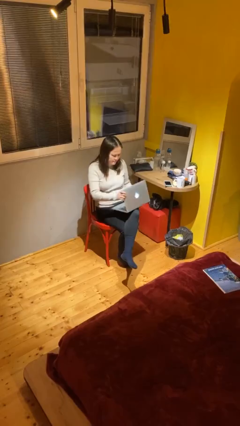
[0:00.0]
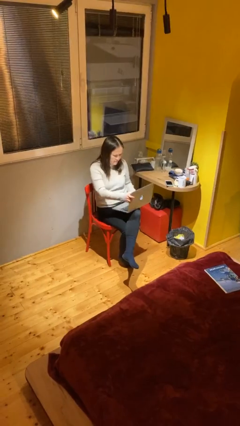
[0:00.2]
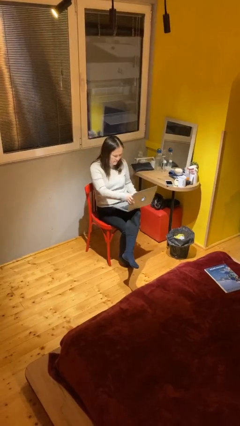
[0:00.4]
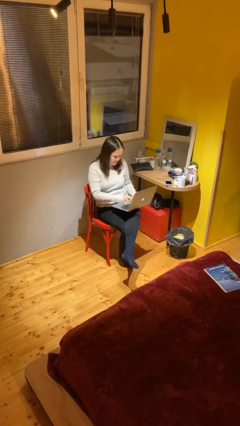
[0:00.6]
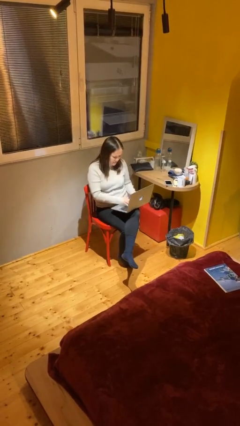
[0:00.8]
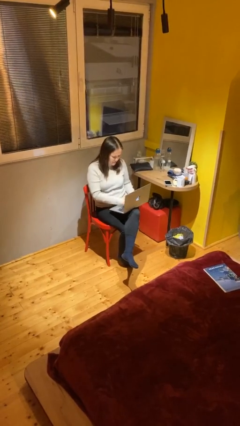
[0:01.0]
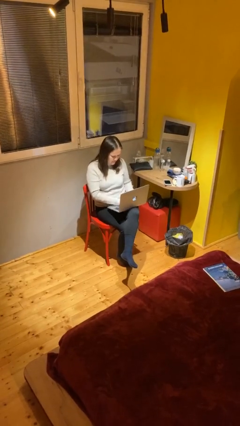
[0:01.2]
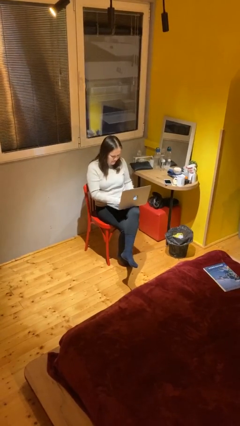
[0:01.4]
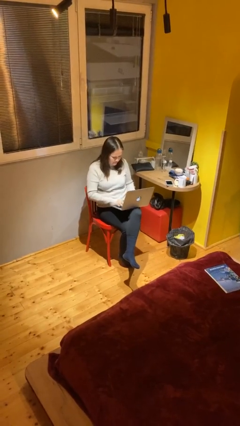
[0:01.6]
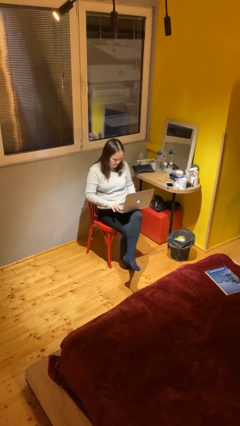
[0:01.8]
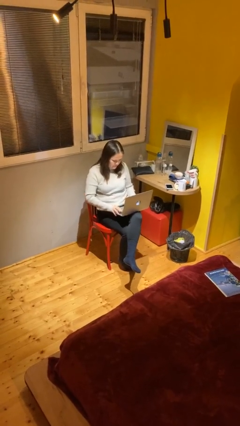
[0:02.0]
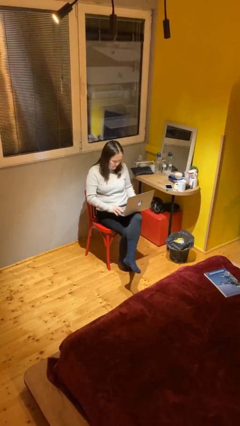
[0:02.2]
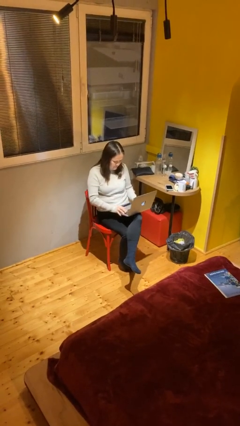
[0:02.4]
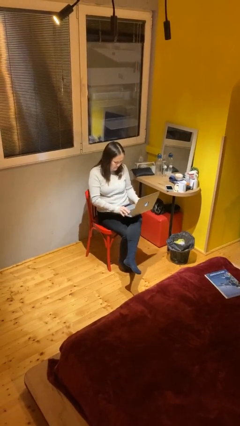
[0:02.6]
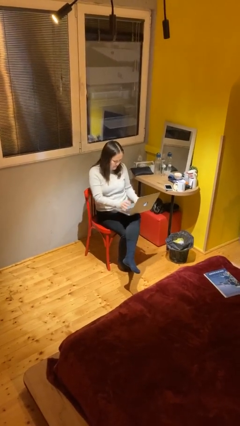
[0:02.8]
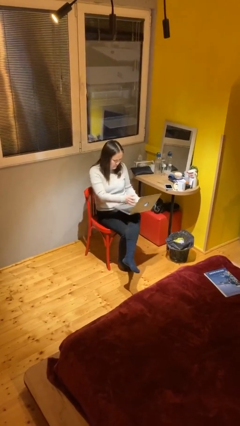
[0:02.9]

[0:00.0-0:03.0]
person interacts with laptop

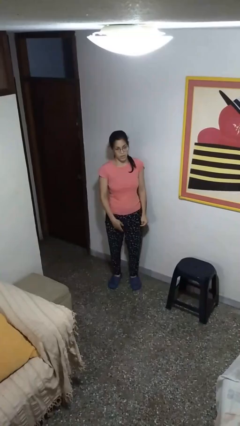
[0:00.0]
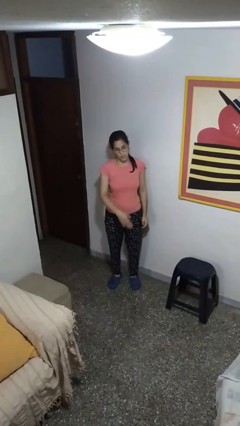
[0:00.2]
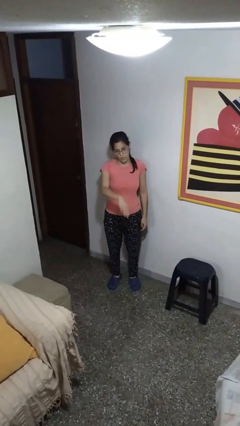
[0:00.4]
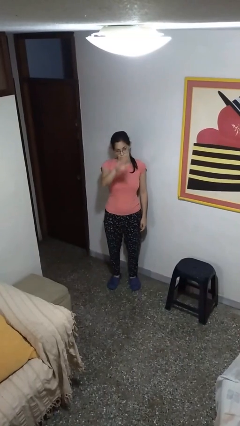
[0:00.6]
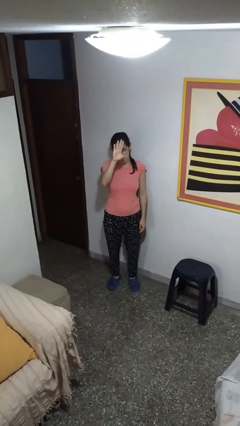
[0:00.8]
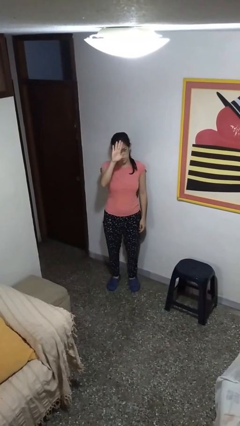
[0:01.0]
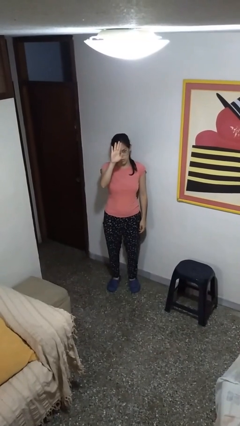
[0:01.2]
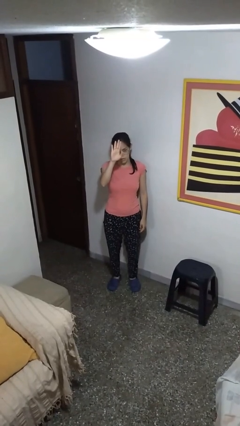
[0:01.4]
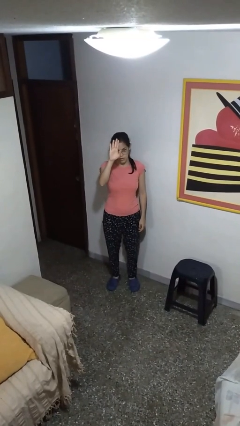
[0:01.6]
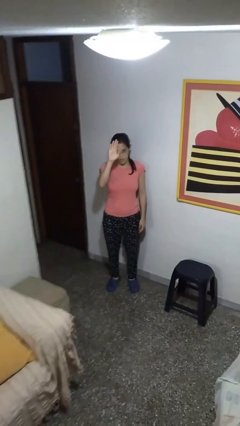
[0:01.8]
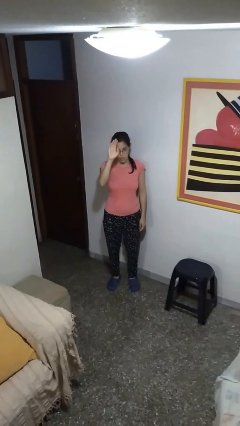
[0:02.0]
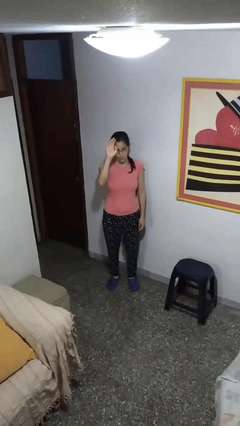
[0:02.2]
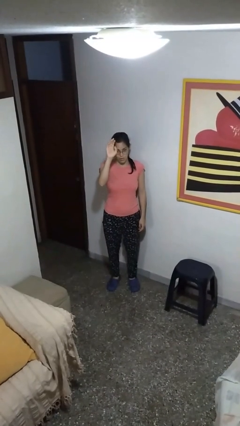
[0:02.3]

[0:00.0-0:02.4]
person gestures swipe up

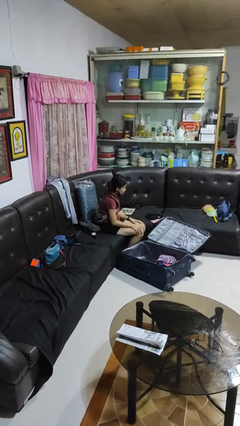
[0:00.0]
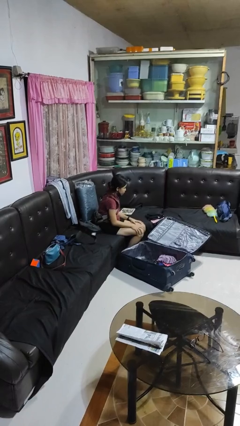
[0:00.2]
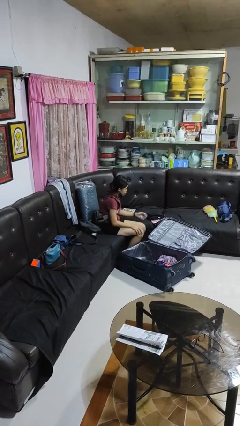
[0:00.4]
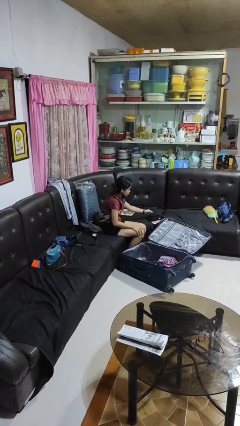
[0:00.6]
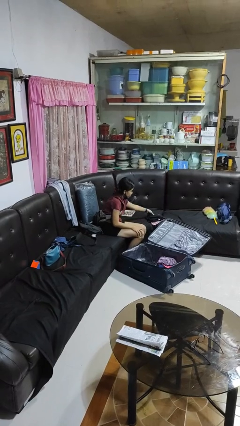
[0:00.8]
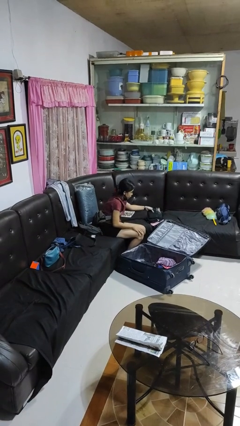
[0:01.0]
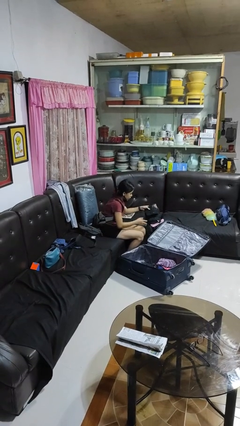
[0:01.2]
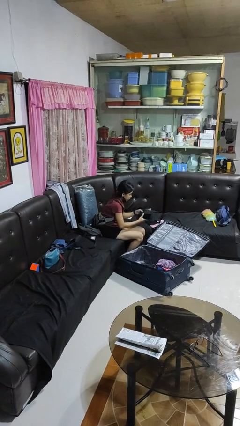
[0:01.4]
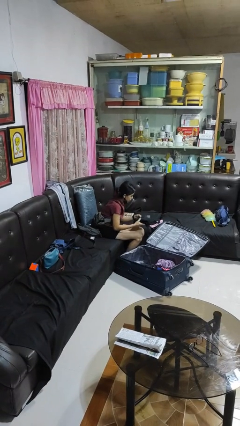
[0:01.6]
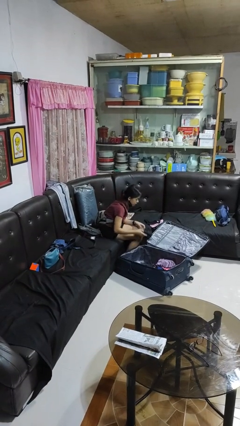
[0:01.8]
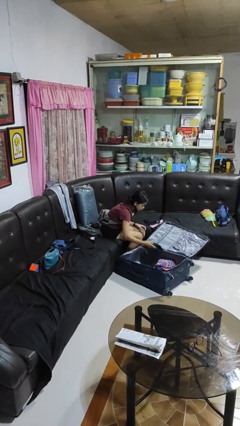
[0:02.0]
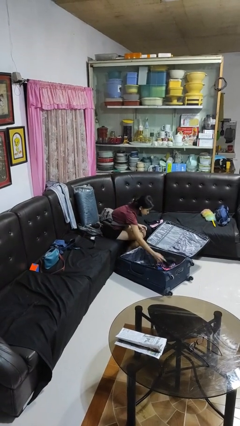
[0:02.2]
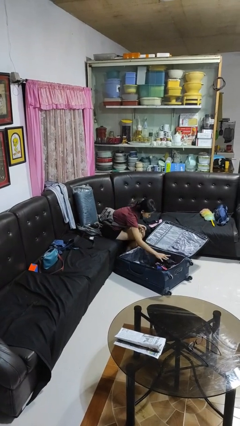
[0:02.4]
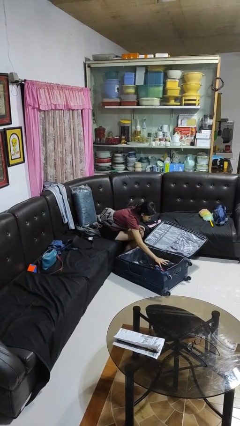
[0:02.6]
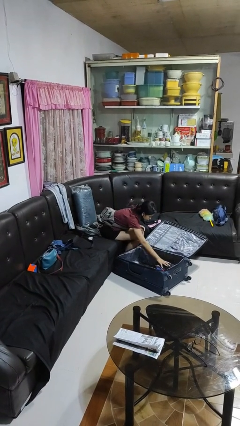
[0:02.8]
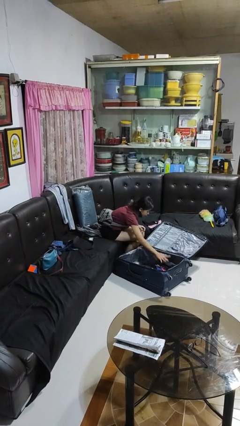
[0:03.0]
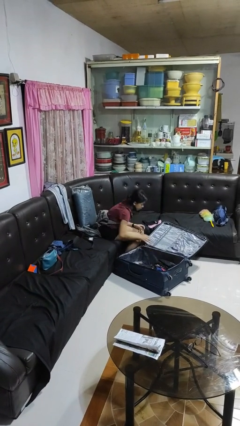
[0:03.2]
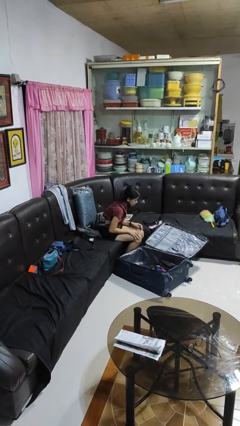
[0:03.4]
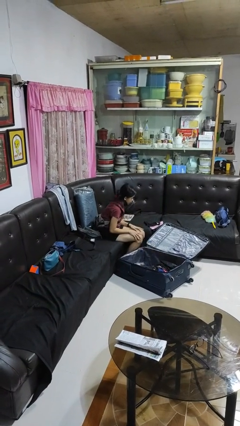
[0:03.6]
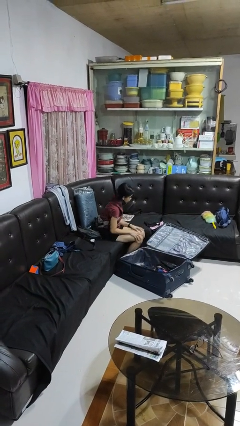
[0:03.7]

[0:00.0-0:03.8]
person loads clothes into suitcase

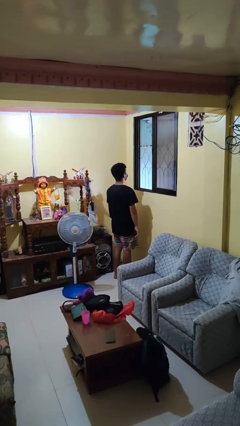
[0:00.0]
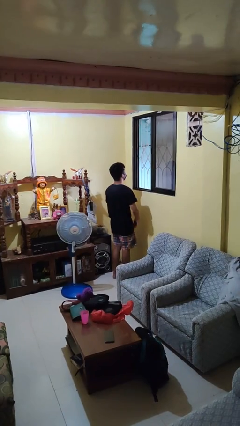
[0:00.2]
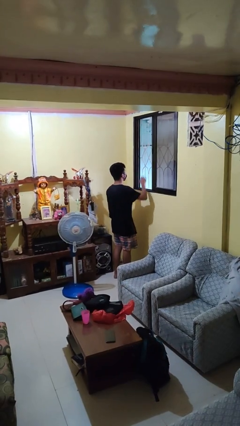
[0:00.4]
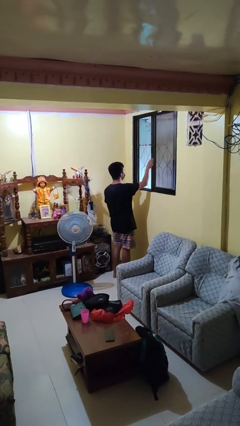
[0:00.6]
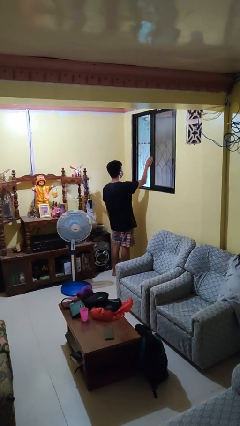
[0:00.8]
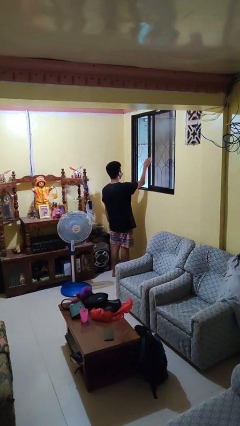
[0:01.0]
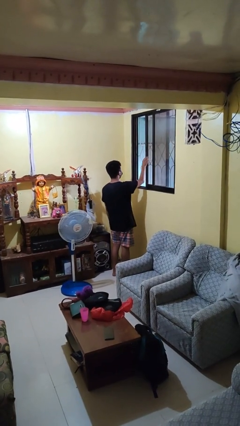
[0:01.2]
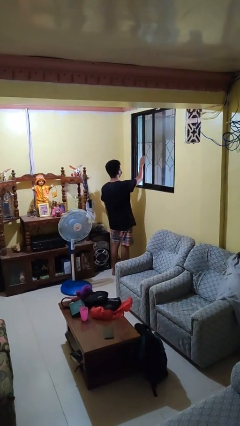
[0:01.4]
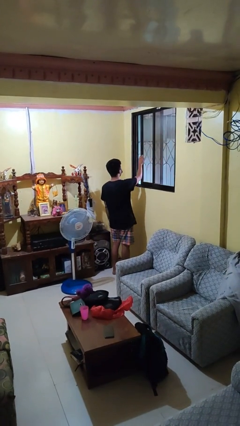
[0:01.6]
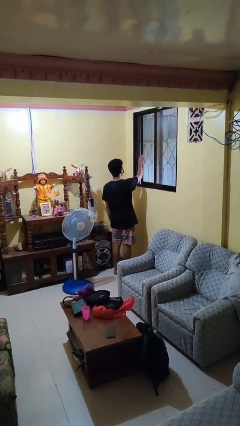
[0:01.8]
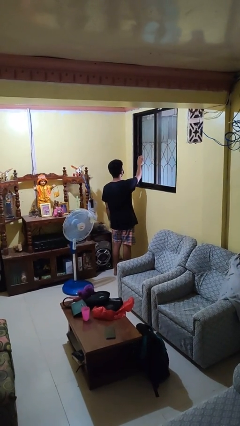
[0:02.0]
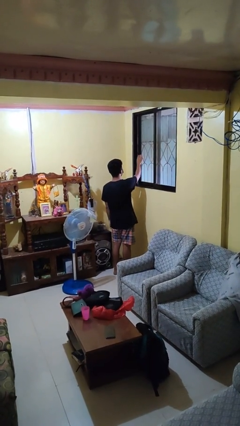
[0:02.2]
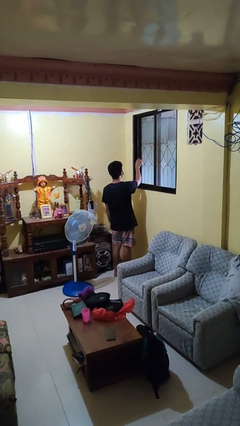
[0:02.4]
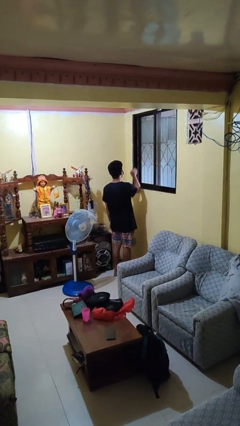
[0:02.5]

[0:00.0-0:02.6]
person closes home window

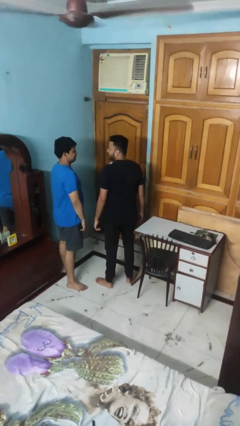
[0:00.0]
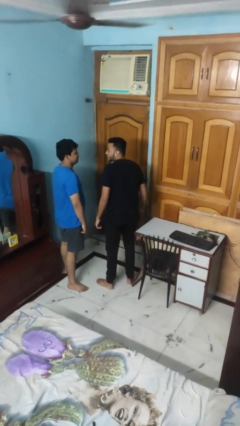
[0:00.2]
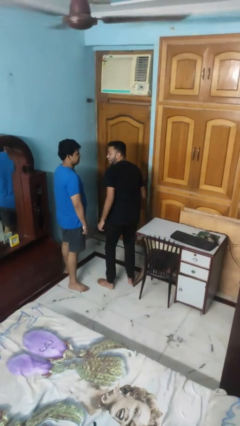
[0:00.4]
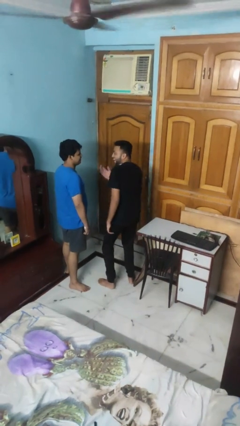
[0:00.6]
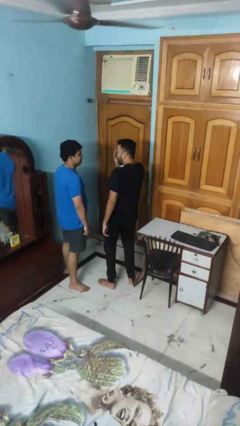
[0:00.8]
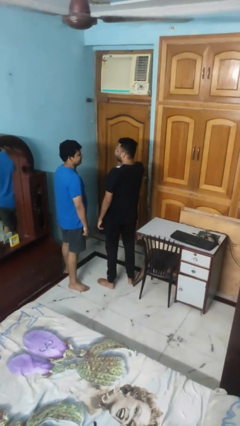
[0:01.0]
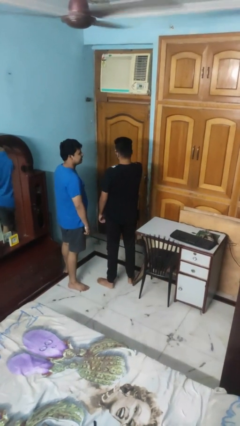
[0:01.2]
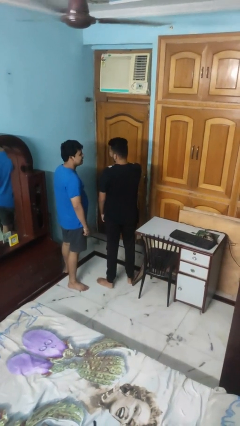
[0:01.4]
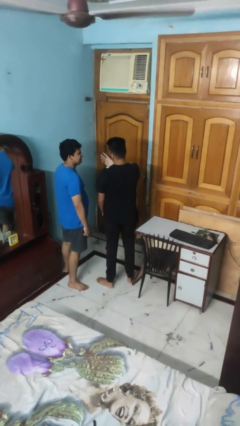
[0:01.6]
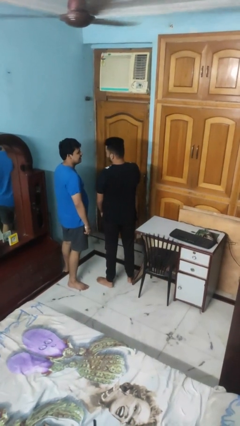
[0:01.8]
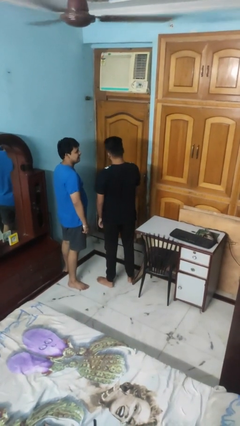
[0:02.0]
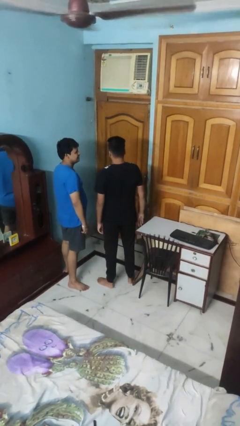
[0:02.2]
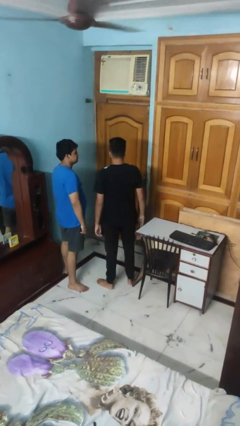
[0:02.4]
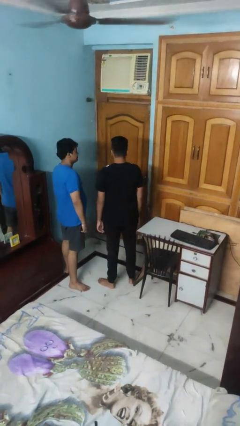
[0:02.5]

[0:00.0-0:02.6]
person laughs with person

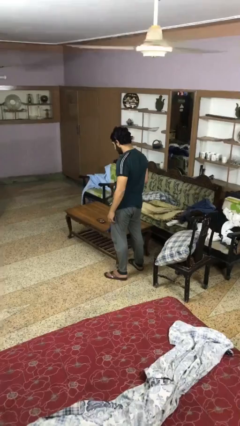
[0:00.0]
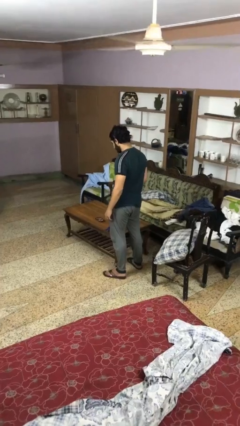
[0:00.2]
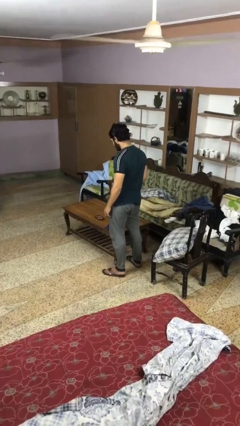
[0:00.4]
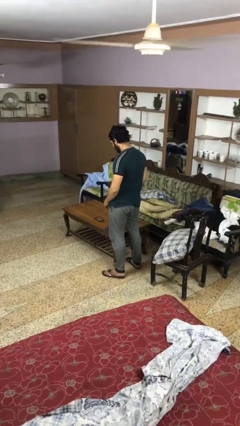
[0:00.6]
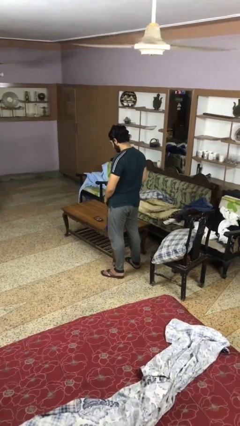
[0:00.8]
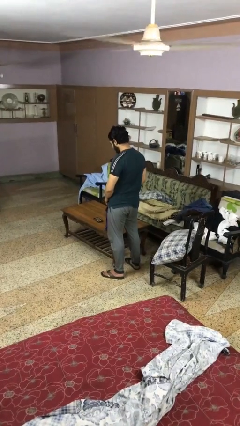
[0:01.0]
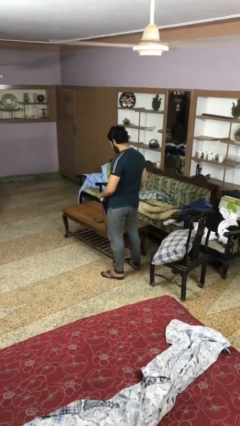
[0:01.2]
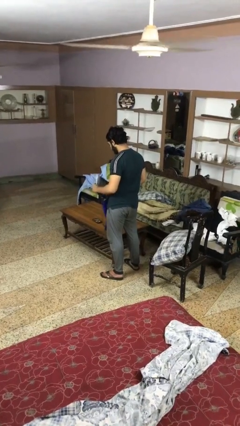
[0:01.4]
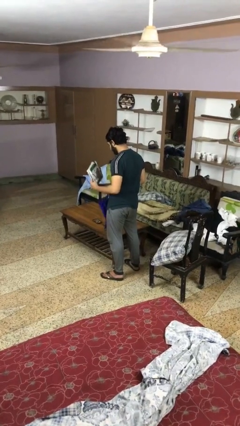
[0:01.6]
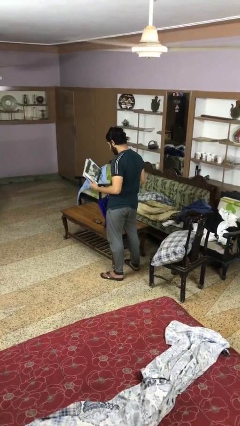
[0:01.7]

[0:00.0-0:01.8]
person takes object from bag

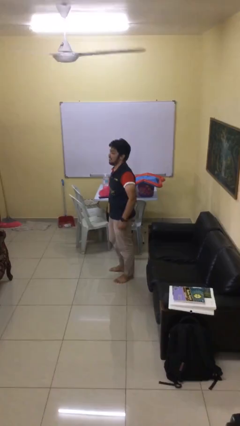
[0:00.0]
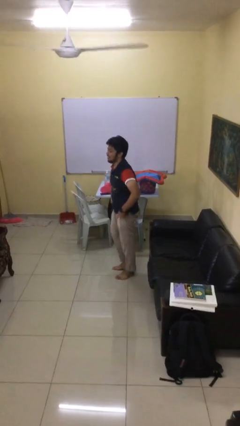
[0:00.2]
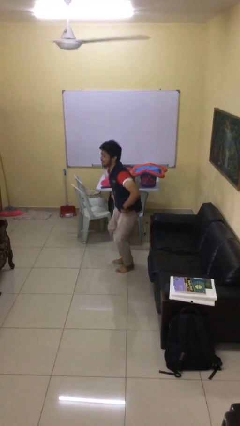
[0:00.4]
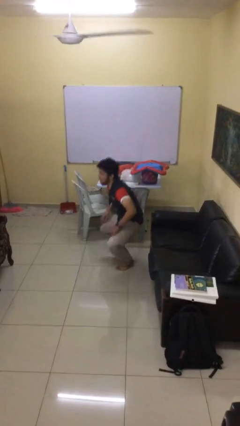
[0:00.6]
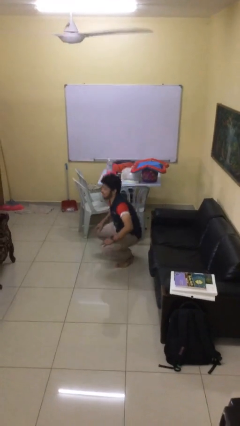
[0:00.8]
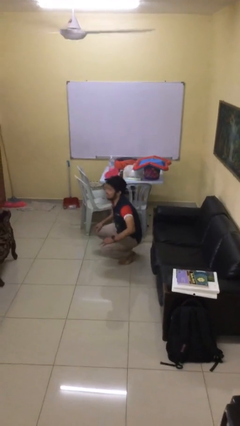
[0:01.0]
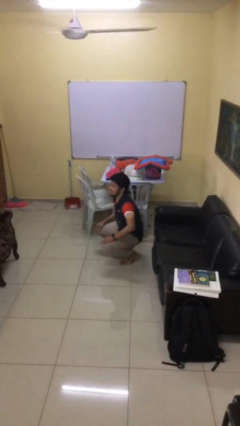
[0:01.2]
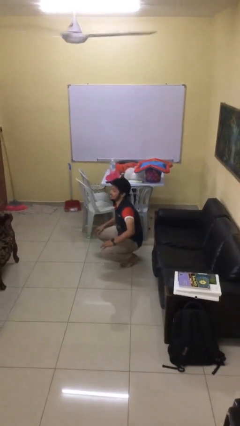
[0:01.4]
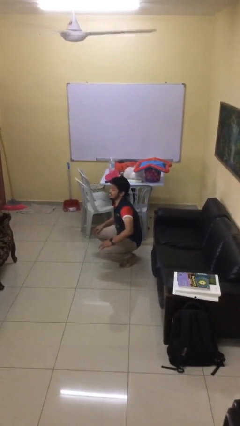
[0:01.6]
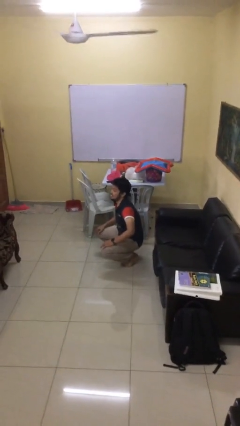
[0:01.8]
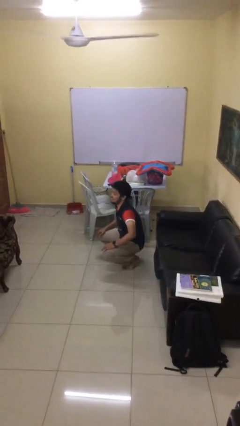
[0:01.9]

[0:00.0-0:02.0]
person squats
